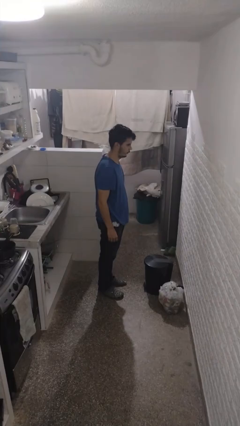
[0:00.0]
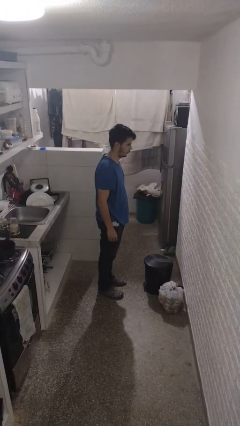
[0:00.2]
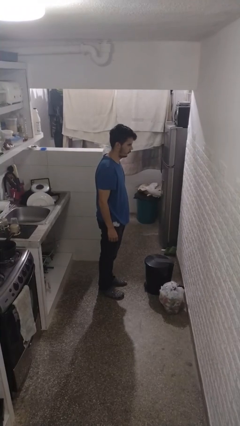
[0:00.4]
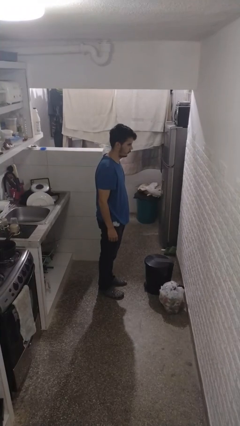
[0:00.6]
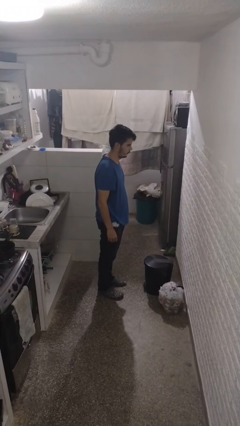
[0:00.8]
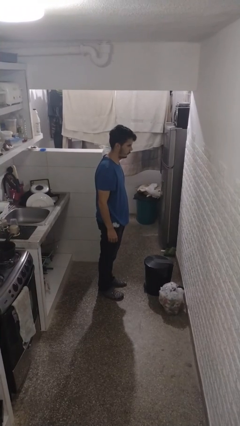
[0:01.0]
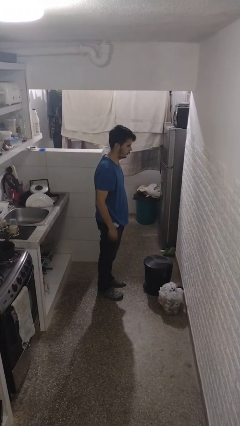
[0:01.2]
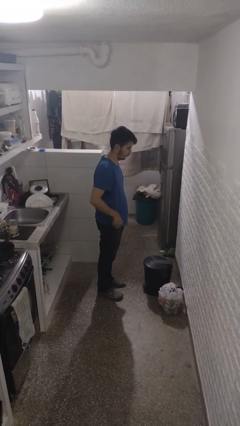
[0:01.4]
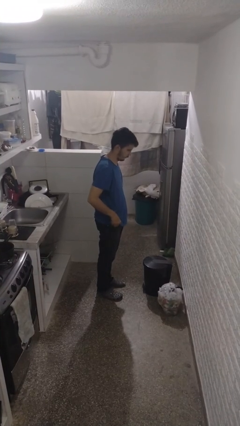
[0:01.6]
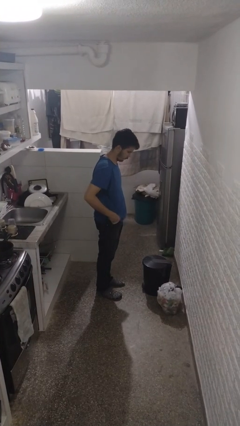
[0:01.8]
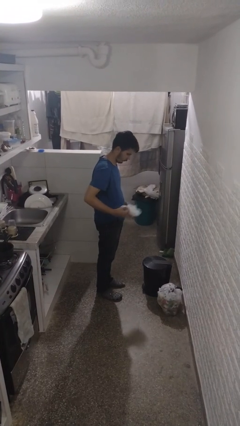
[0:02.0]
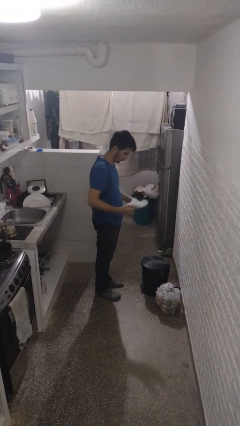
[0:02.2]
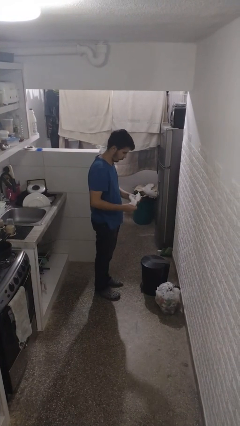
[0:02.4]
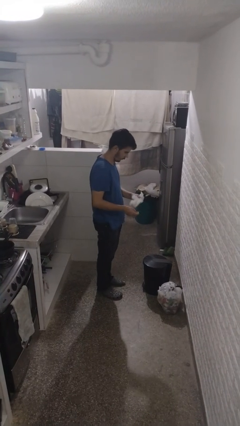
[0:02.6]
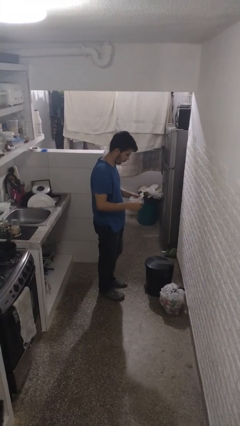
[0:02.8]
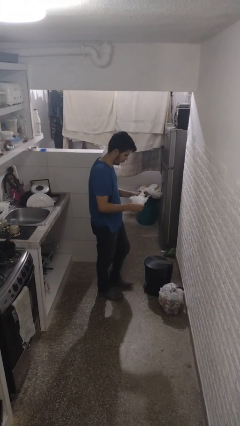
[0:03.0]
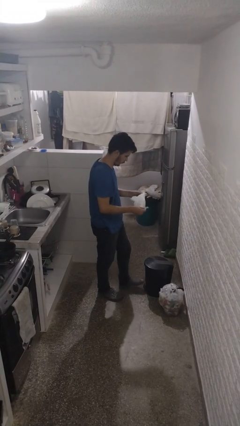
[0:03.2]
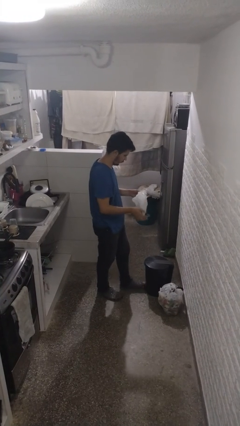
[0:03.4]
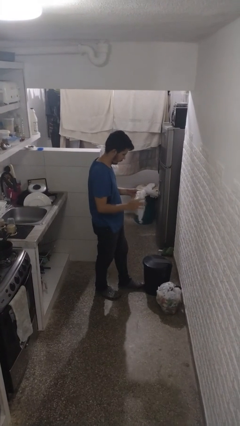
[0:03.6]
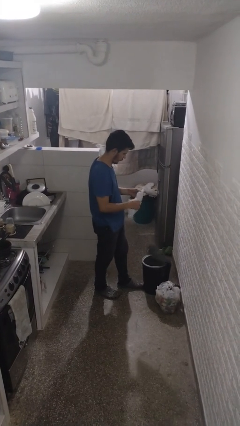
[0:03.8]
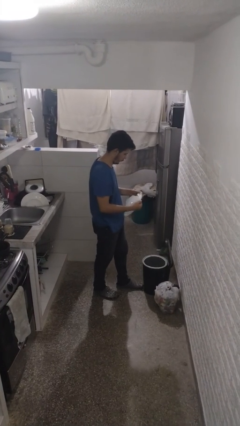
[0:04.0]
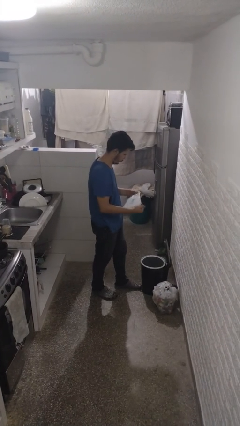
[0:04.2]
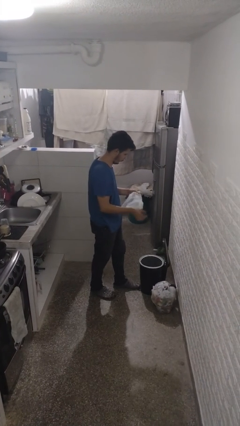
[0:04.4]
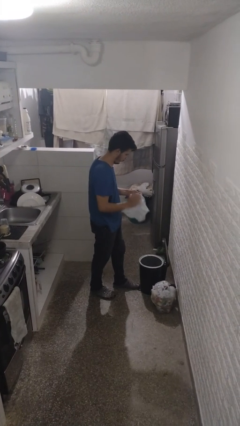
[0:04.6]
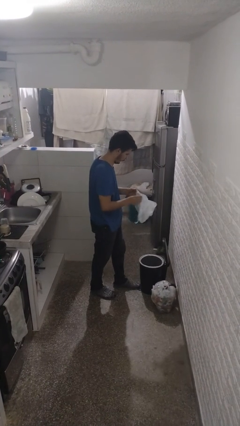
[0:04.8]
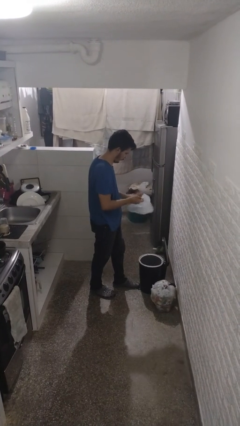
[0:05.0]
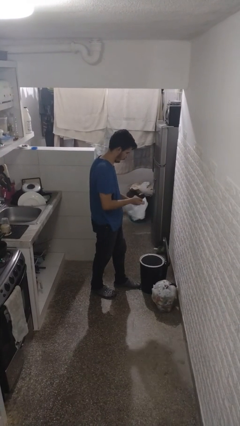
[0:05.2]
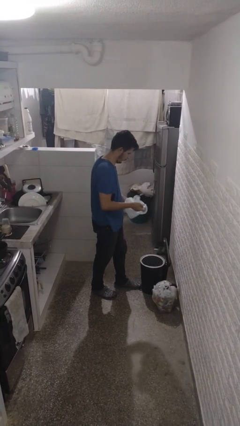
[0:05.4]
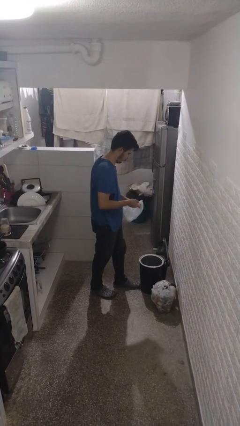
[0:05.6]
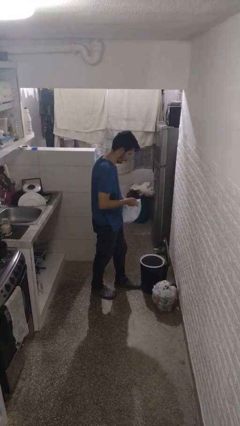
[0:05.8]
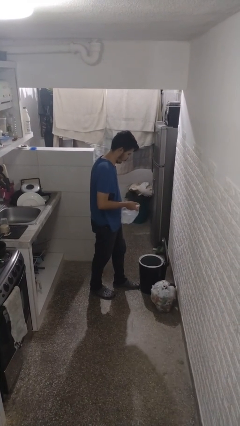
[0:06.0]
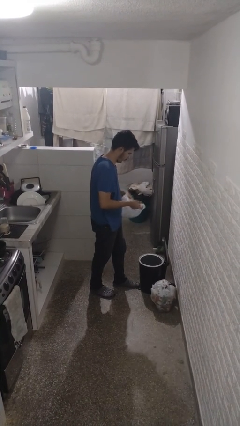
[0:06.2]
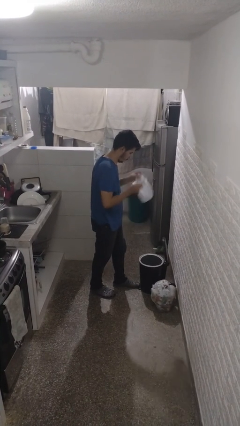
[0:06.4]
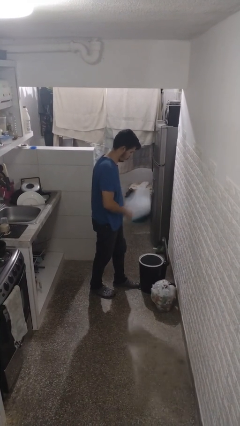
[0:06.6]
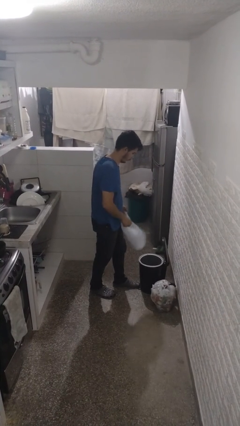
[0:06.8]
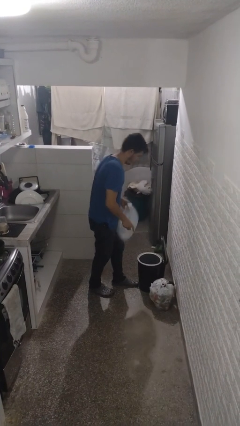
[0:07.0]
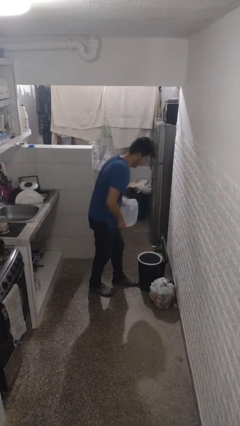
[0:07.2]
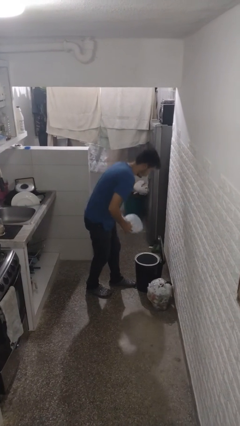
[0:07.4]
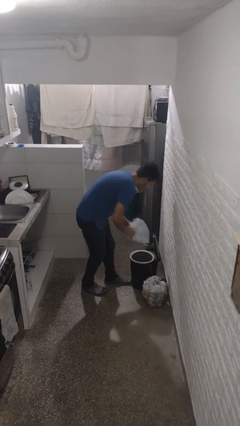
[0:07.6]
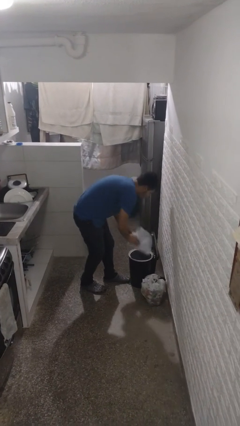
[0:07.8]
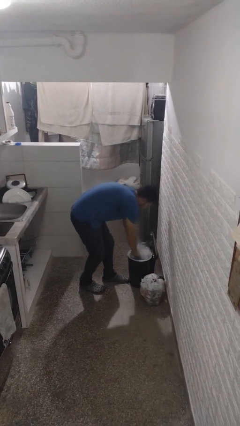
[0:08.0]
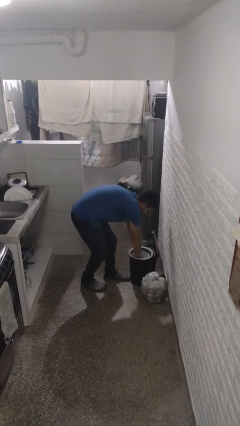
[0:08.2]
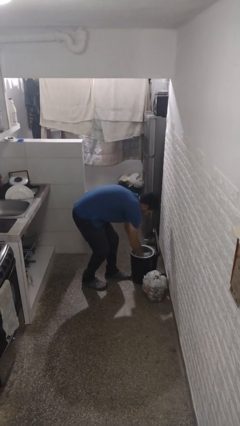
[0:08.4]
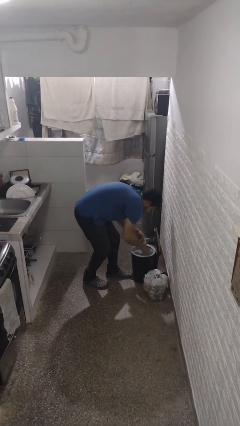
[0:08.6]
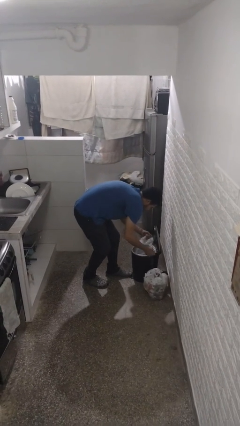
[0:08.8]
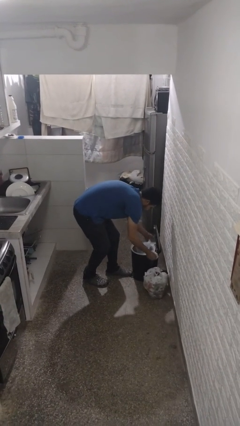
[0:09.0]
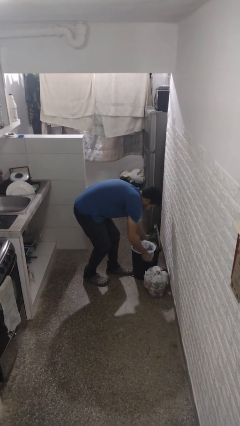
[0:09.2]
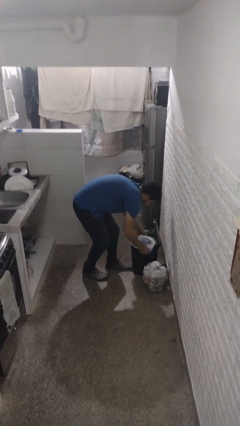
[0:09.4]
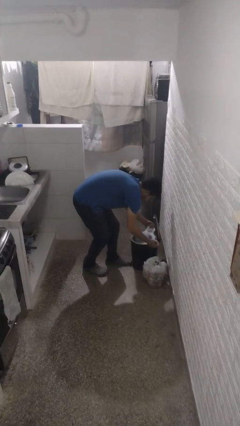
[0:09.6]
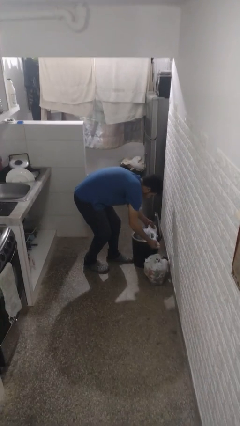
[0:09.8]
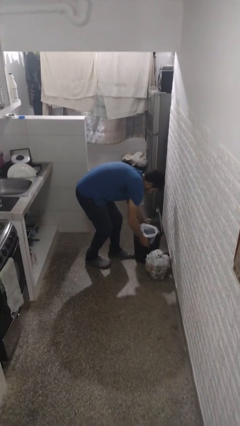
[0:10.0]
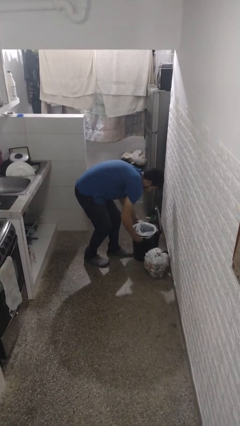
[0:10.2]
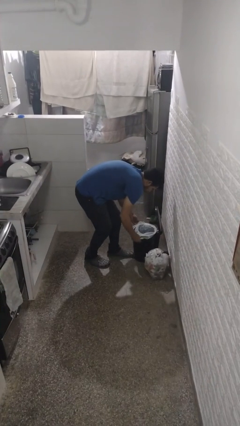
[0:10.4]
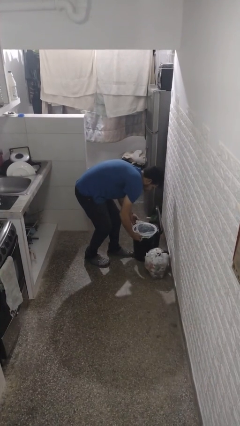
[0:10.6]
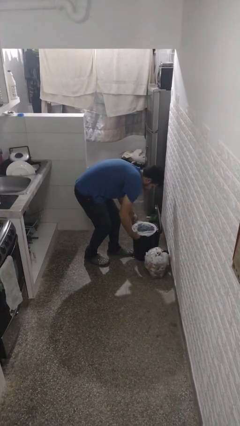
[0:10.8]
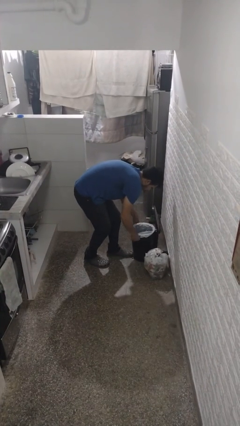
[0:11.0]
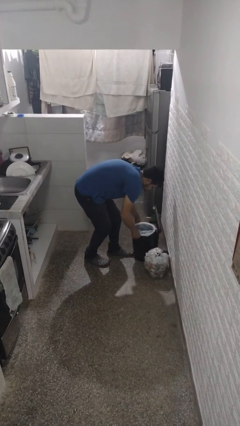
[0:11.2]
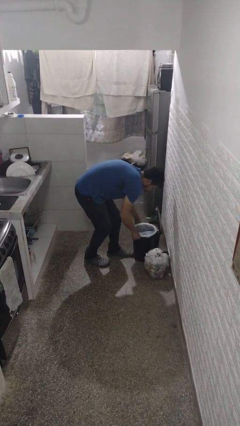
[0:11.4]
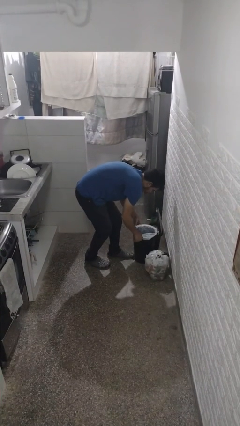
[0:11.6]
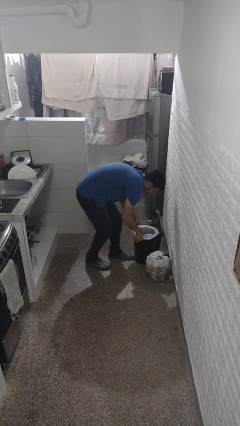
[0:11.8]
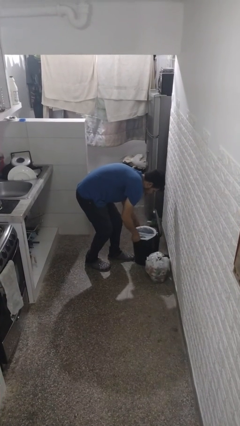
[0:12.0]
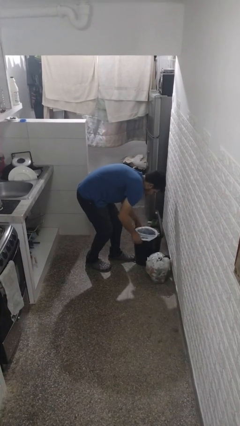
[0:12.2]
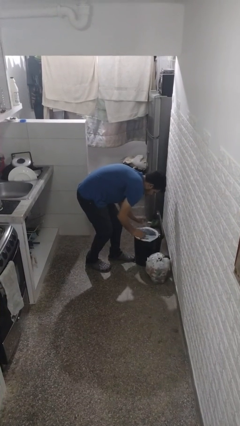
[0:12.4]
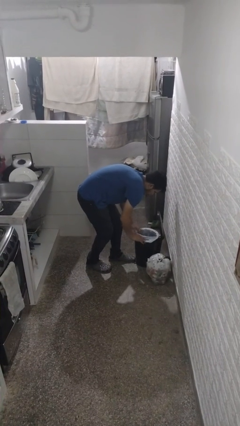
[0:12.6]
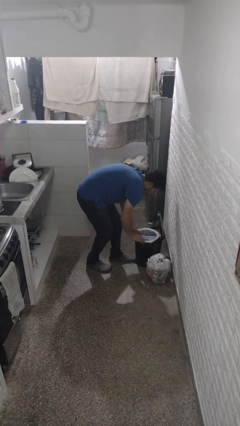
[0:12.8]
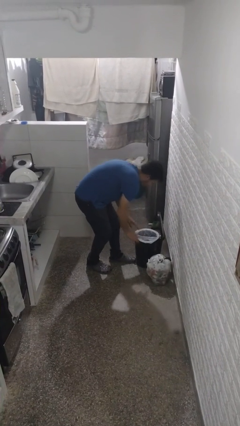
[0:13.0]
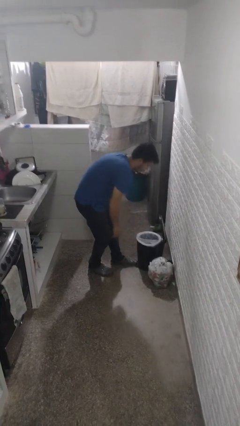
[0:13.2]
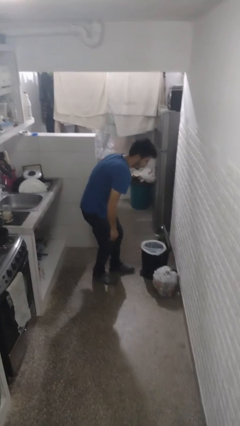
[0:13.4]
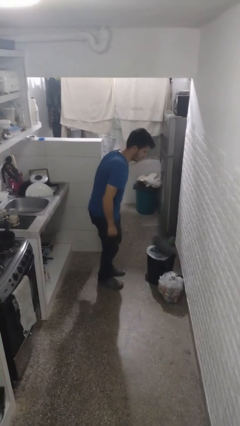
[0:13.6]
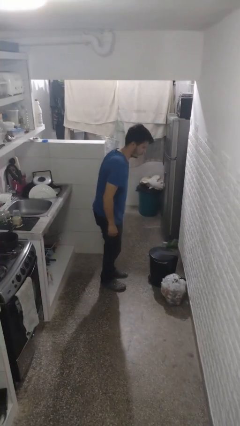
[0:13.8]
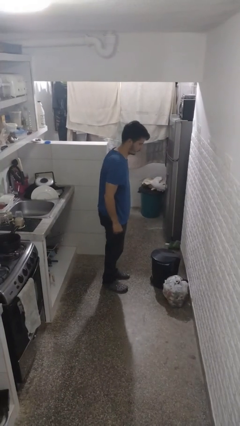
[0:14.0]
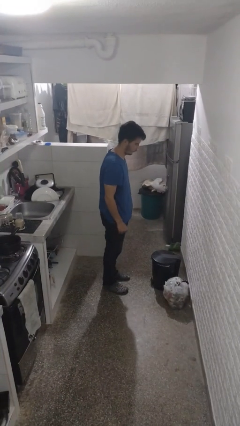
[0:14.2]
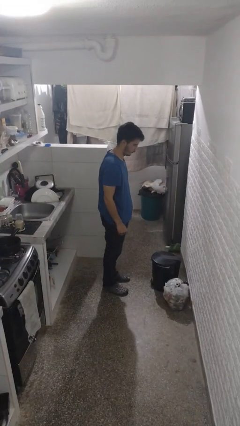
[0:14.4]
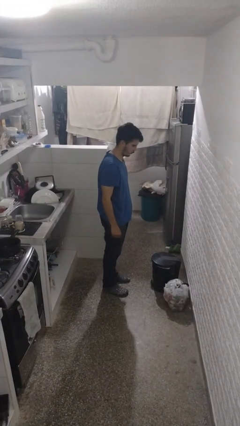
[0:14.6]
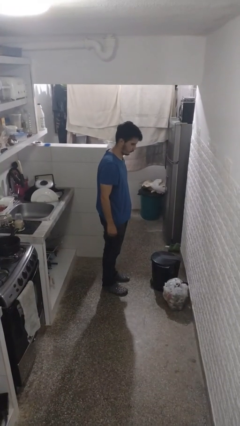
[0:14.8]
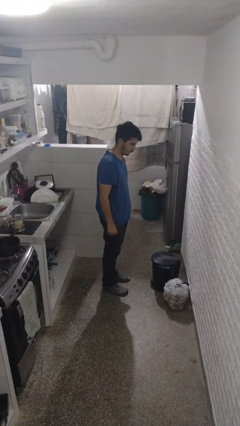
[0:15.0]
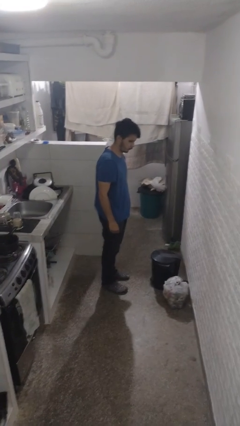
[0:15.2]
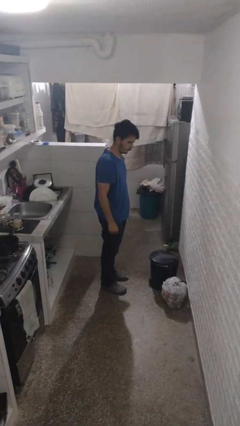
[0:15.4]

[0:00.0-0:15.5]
person inserts trashbag into trashcan

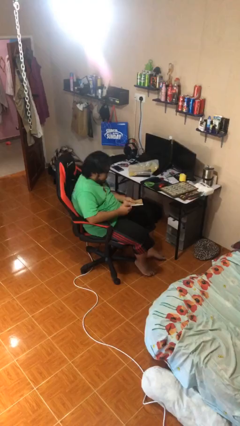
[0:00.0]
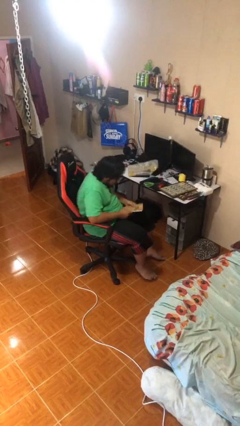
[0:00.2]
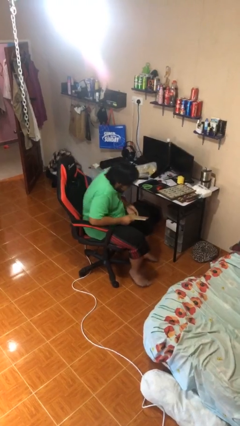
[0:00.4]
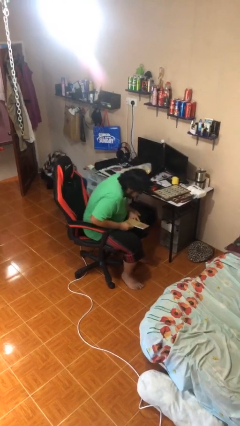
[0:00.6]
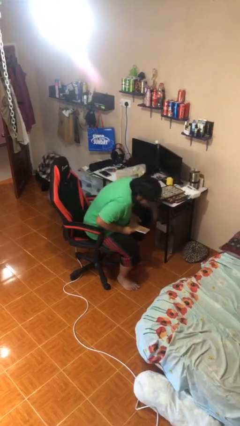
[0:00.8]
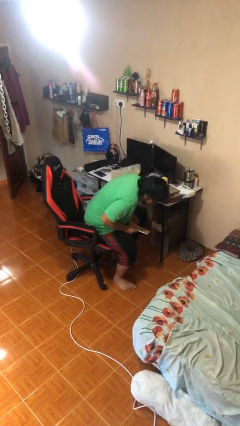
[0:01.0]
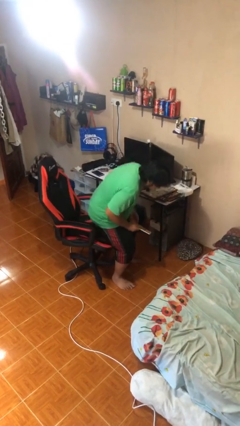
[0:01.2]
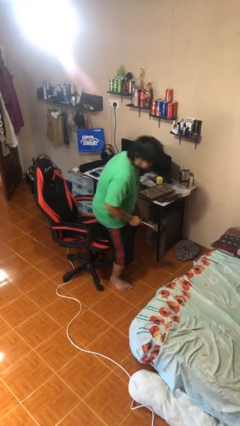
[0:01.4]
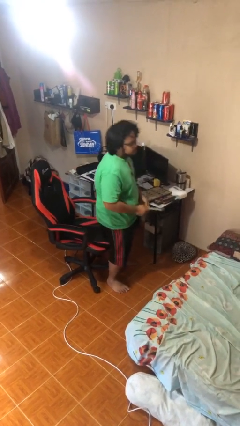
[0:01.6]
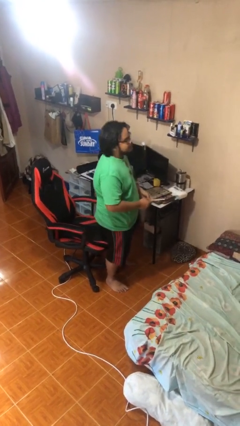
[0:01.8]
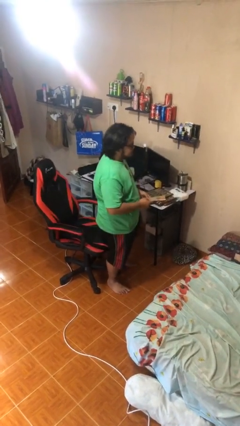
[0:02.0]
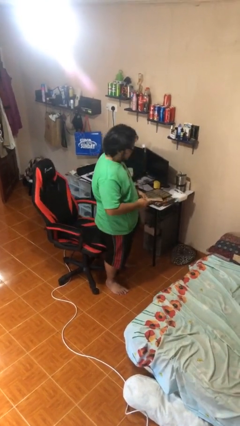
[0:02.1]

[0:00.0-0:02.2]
person stands up

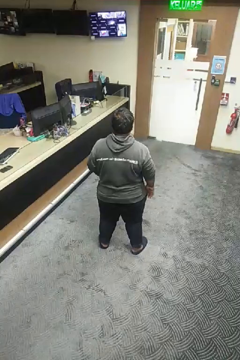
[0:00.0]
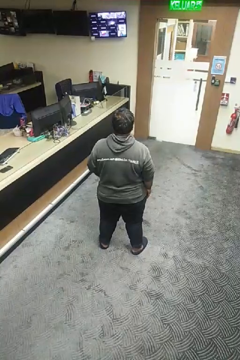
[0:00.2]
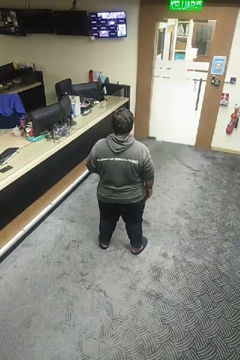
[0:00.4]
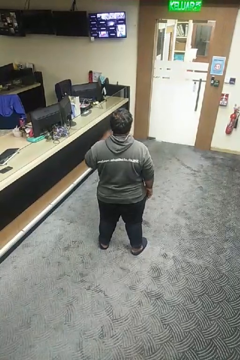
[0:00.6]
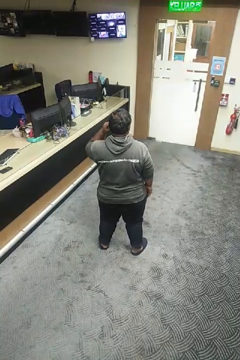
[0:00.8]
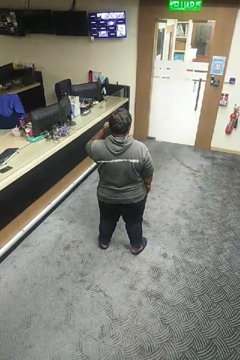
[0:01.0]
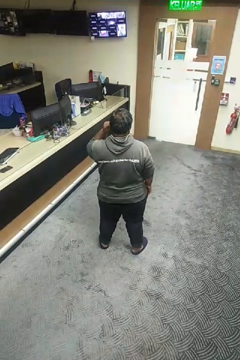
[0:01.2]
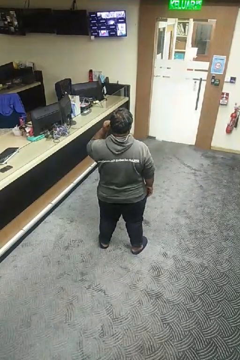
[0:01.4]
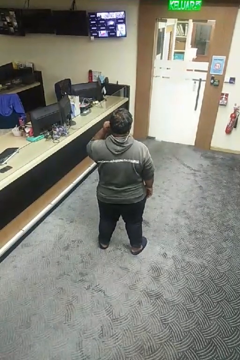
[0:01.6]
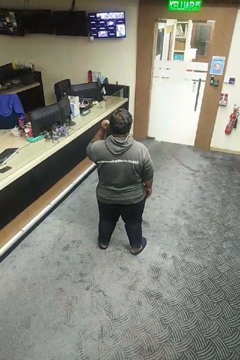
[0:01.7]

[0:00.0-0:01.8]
person touches earlobe
